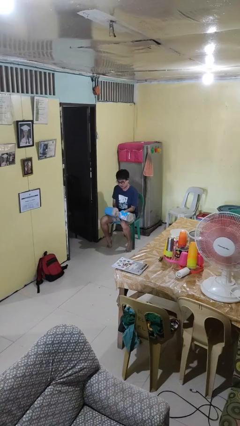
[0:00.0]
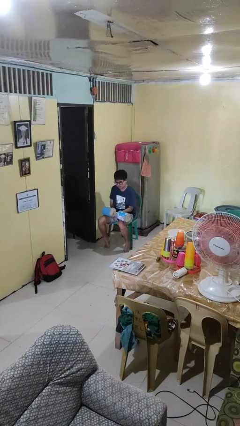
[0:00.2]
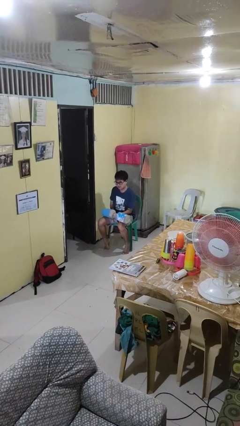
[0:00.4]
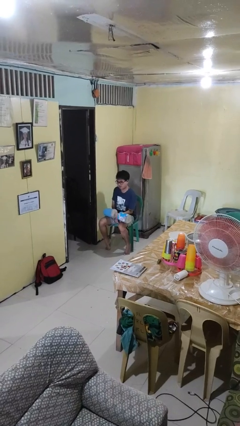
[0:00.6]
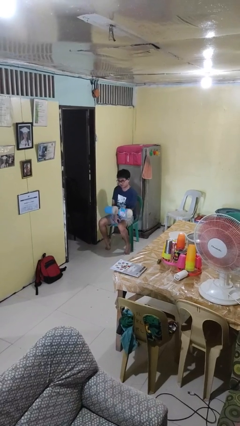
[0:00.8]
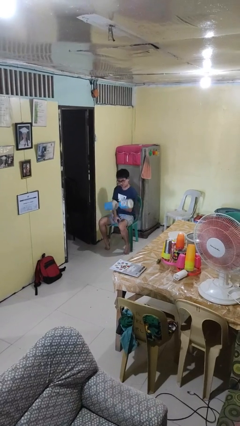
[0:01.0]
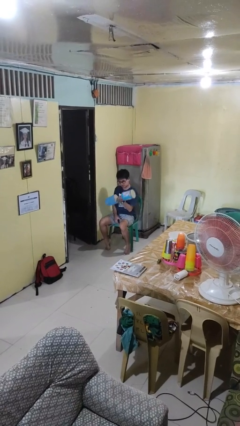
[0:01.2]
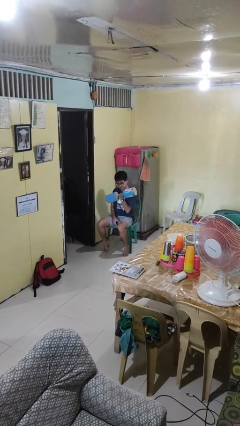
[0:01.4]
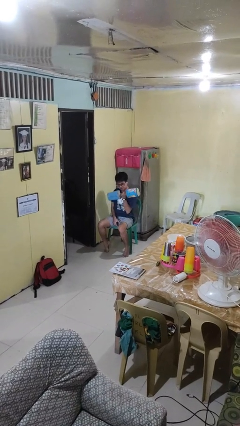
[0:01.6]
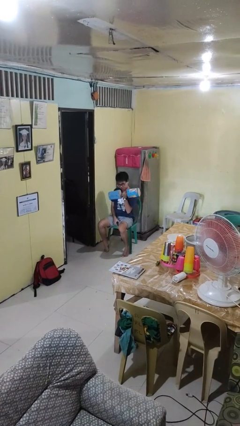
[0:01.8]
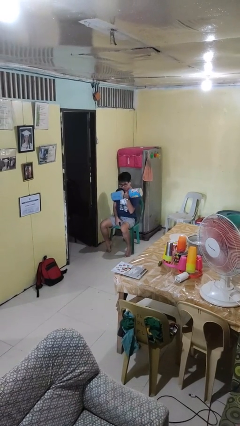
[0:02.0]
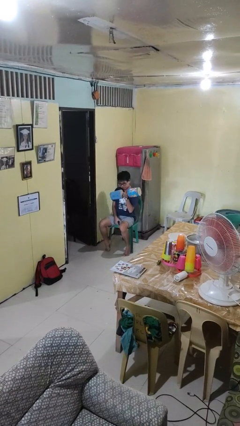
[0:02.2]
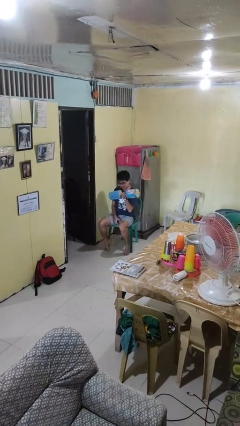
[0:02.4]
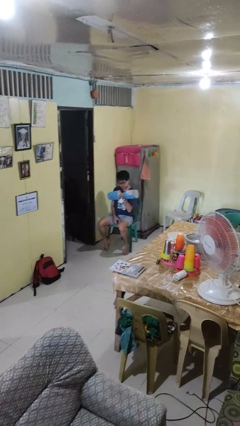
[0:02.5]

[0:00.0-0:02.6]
person lifts dumbbells

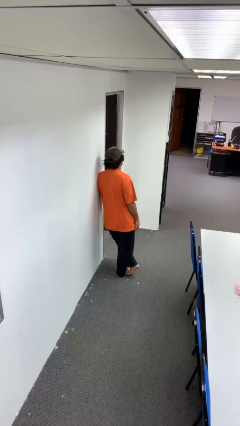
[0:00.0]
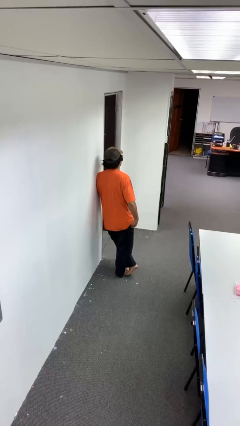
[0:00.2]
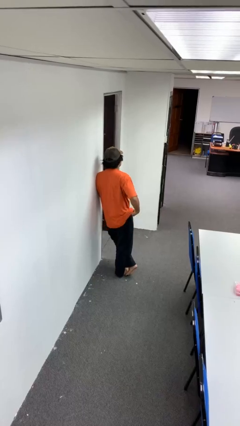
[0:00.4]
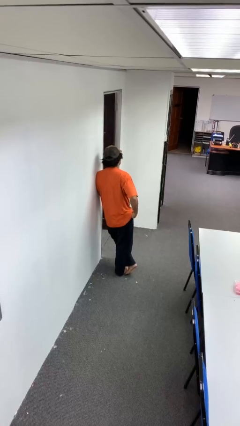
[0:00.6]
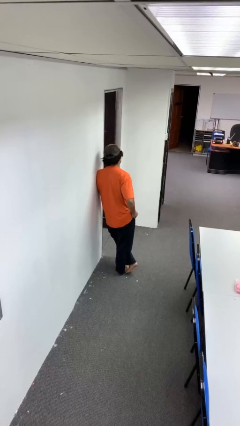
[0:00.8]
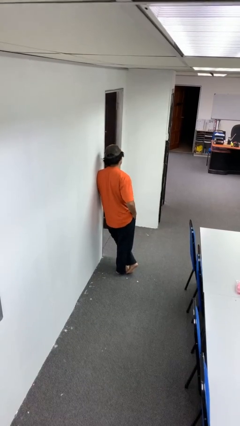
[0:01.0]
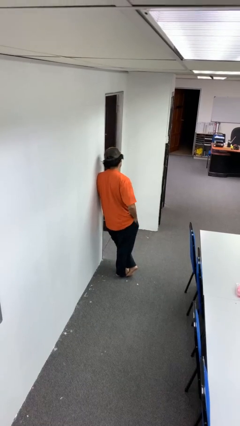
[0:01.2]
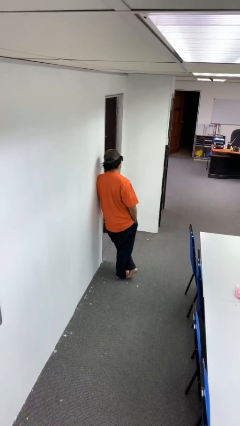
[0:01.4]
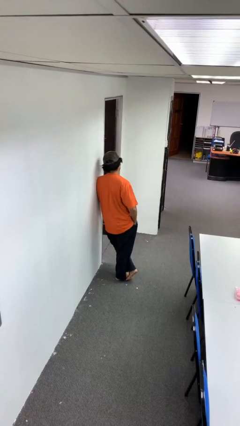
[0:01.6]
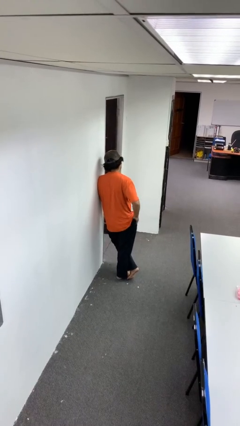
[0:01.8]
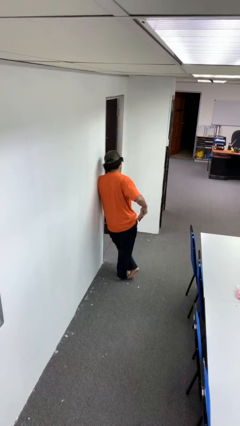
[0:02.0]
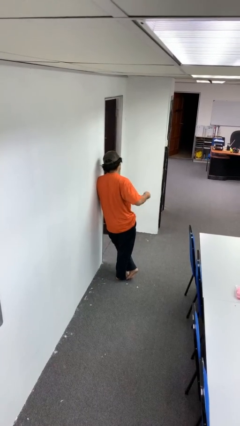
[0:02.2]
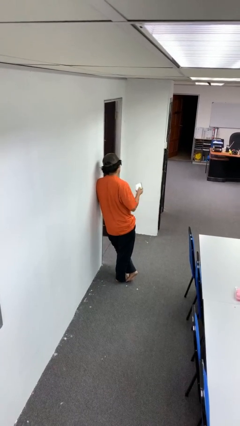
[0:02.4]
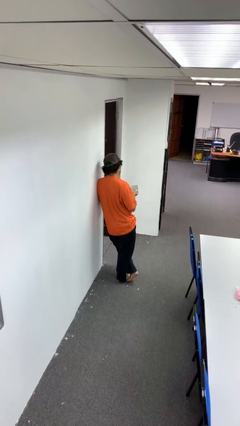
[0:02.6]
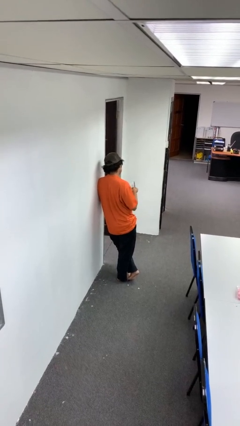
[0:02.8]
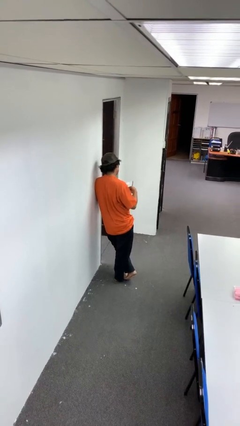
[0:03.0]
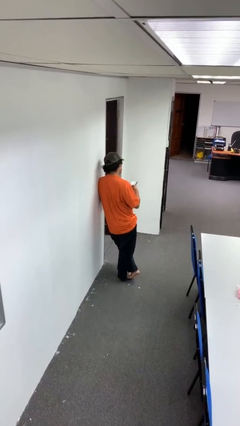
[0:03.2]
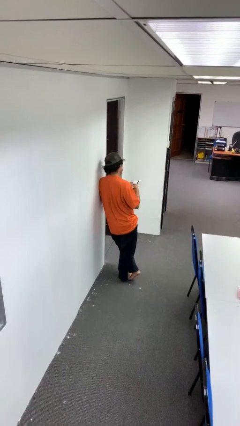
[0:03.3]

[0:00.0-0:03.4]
person takes phone from pocket

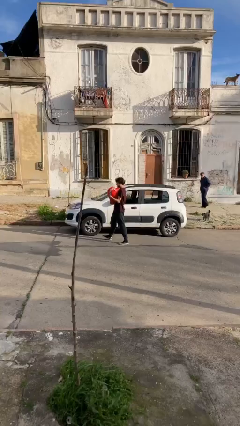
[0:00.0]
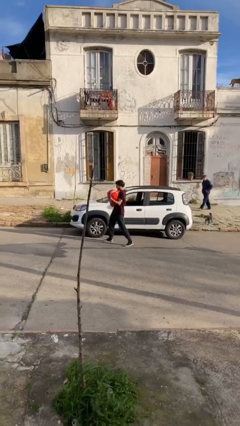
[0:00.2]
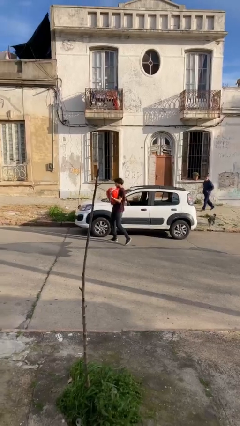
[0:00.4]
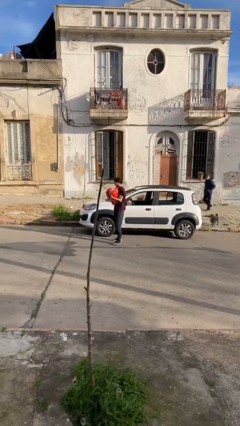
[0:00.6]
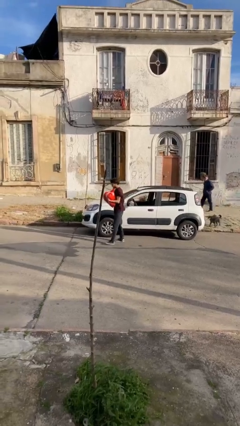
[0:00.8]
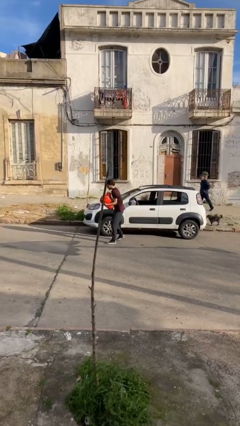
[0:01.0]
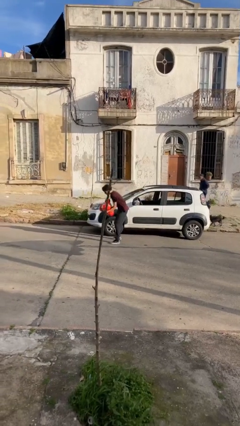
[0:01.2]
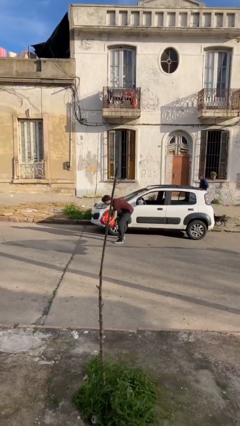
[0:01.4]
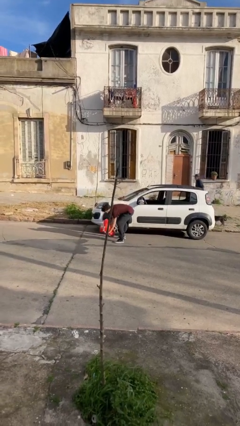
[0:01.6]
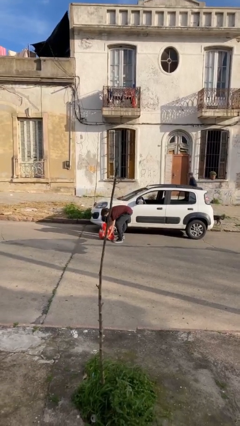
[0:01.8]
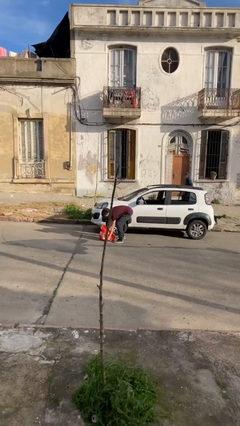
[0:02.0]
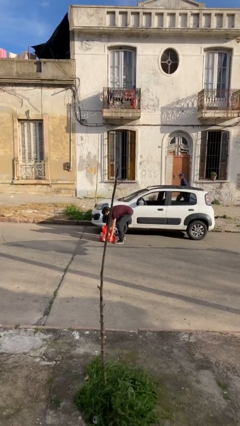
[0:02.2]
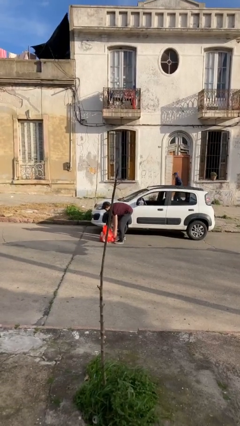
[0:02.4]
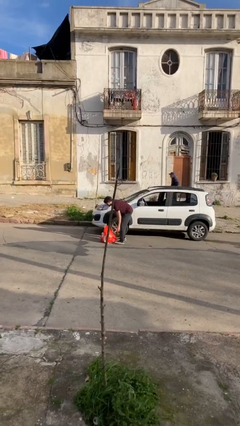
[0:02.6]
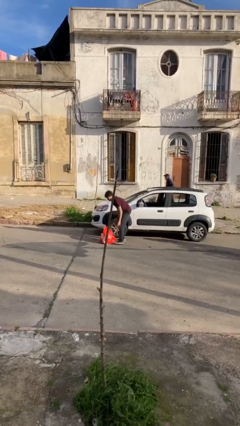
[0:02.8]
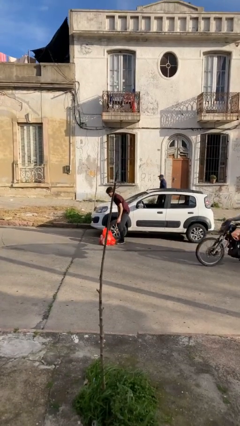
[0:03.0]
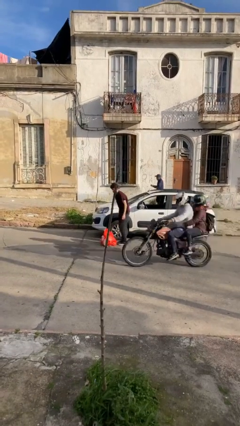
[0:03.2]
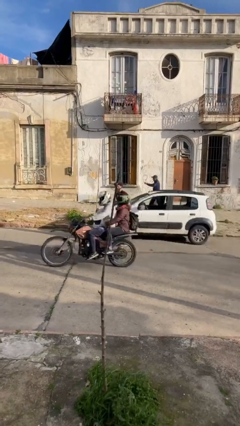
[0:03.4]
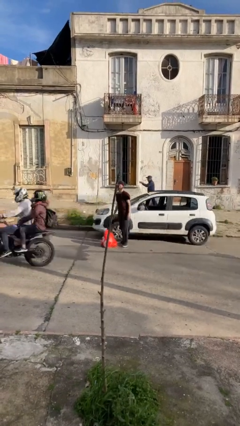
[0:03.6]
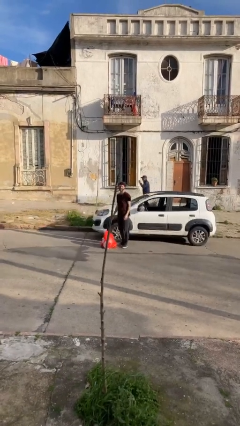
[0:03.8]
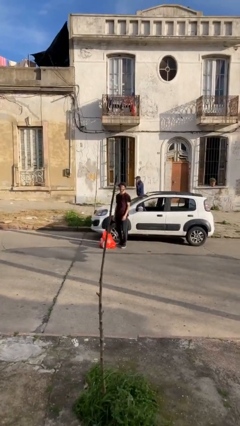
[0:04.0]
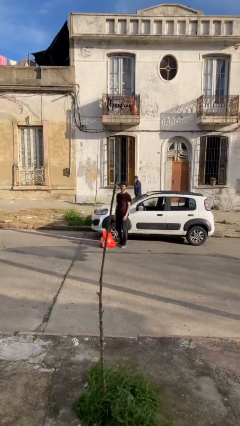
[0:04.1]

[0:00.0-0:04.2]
person puts down object on floor

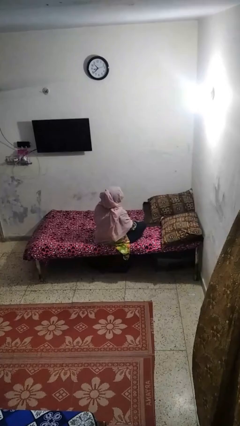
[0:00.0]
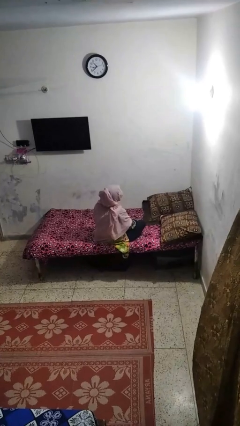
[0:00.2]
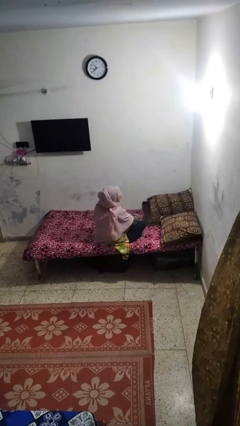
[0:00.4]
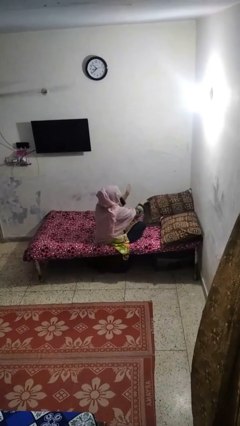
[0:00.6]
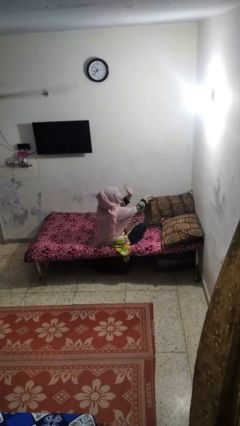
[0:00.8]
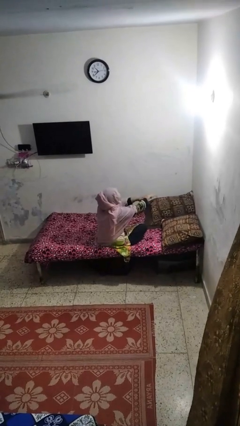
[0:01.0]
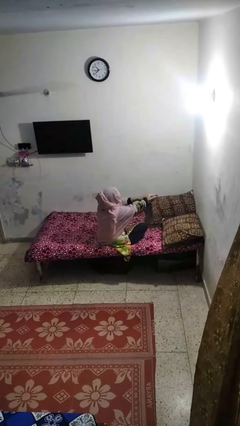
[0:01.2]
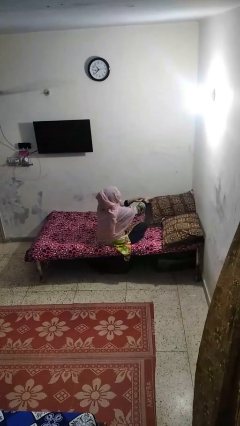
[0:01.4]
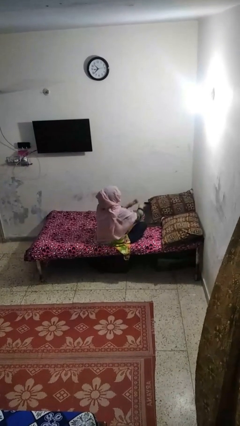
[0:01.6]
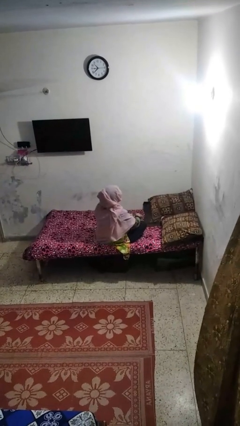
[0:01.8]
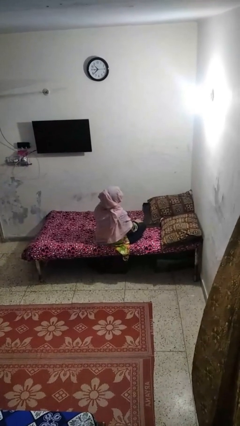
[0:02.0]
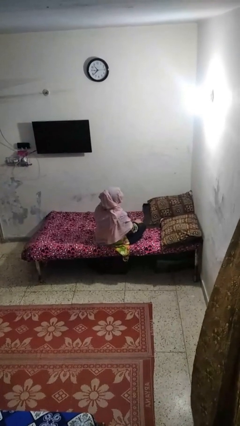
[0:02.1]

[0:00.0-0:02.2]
person swats bug

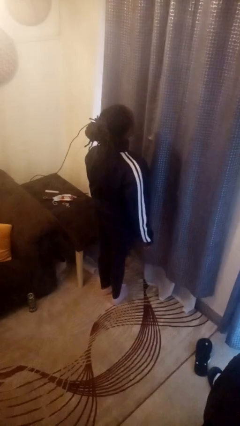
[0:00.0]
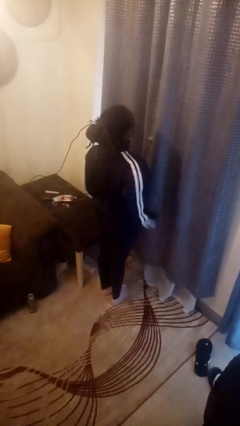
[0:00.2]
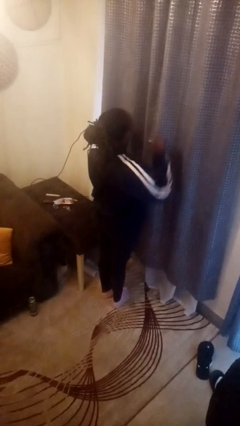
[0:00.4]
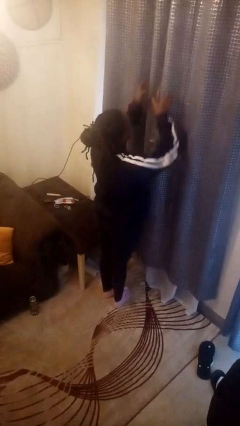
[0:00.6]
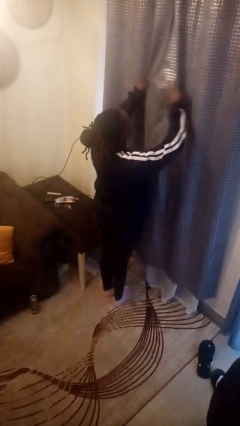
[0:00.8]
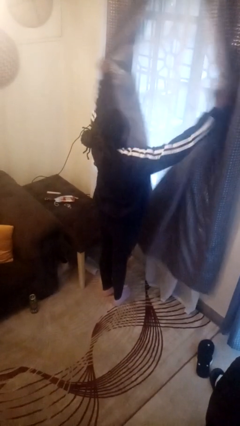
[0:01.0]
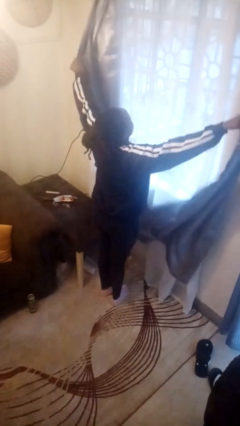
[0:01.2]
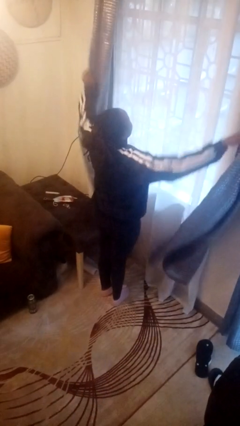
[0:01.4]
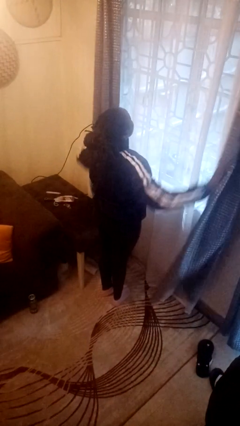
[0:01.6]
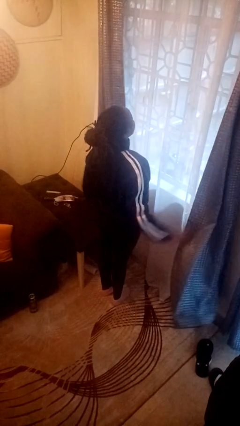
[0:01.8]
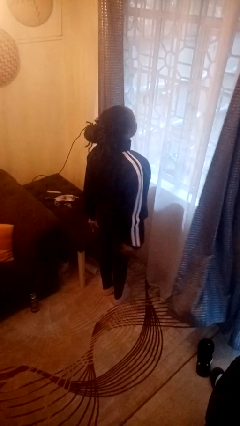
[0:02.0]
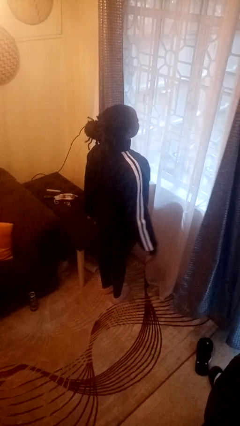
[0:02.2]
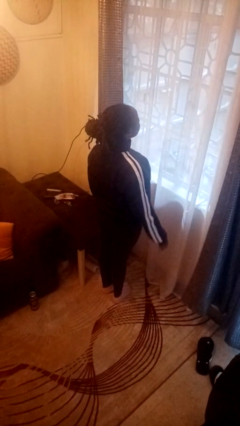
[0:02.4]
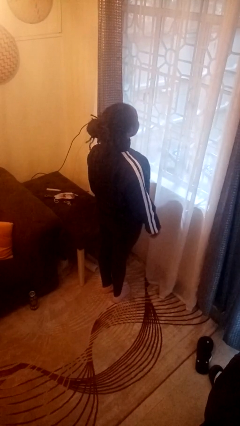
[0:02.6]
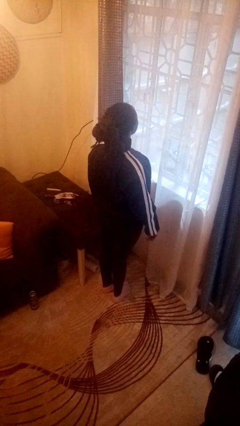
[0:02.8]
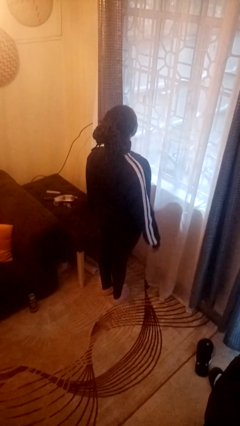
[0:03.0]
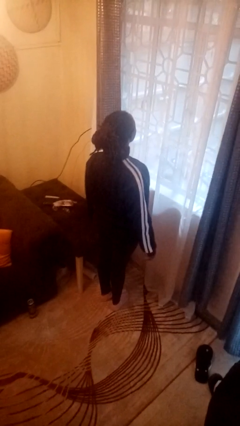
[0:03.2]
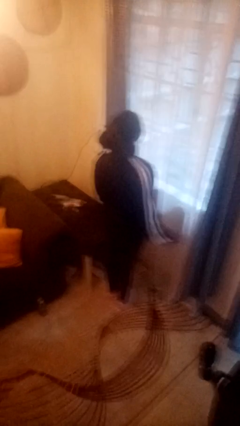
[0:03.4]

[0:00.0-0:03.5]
person opens curtains

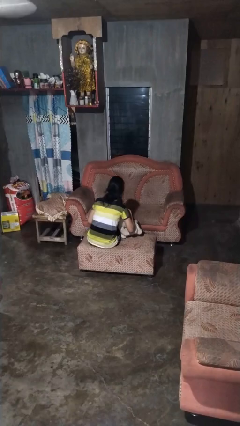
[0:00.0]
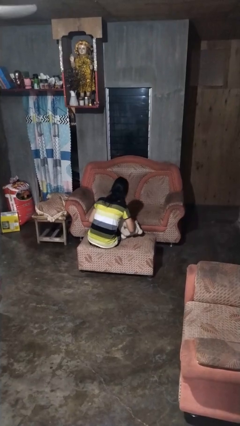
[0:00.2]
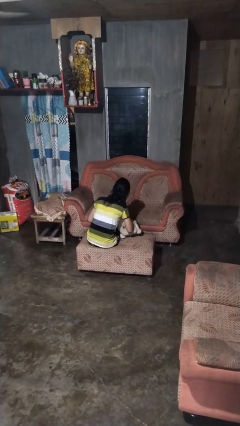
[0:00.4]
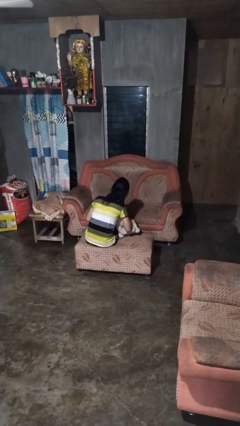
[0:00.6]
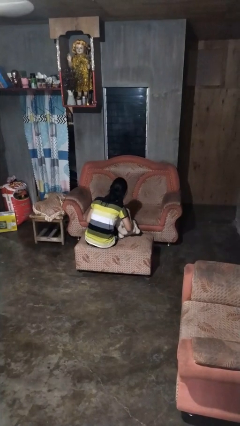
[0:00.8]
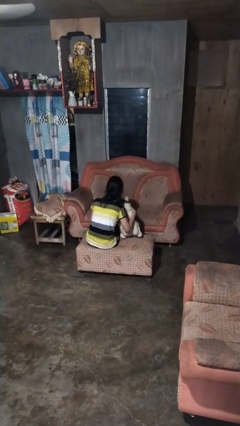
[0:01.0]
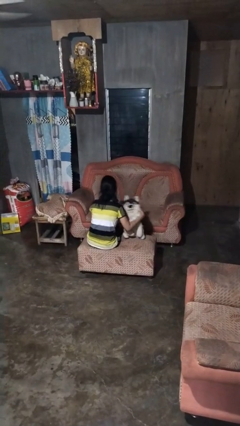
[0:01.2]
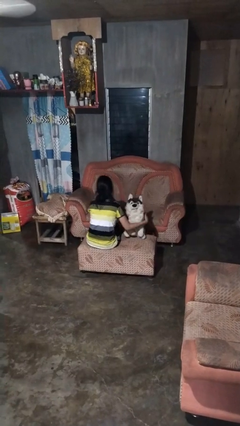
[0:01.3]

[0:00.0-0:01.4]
person hugs stuffed animal

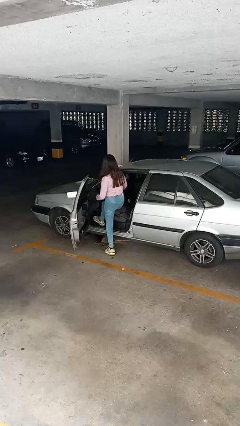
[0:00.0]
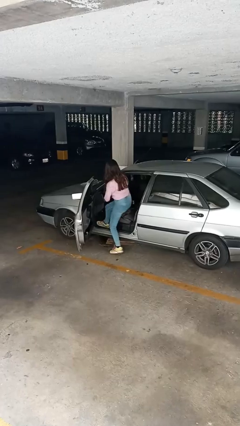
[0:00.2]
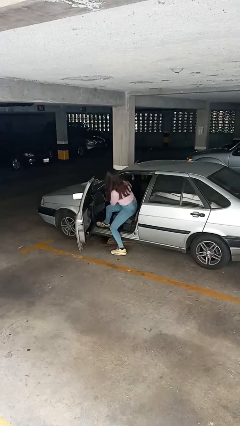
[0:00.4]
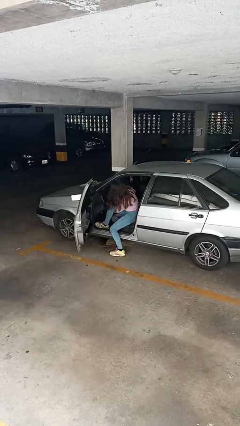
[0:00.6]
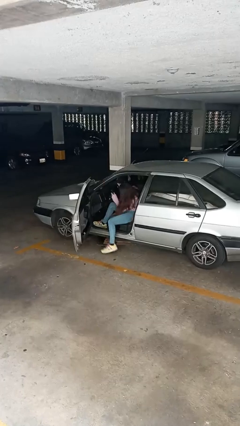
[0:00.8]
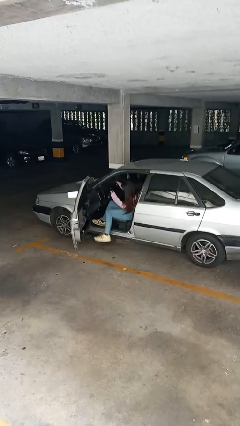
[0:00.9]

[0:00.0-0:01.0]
person enters car
